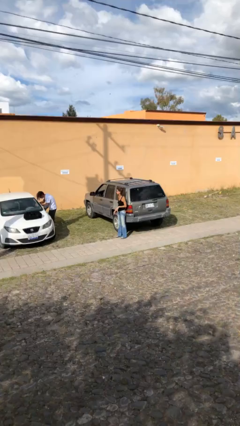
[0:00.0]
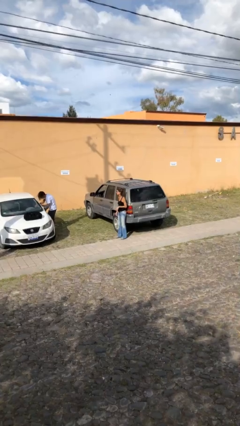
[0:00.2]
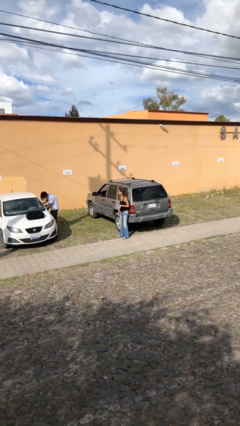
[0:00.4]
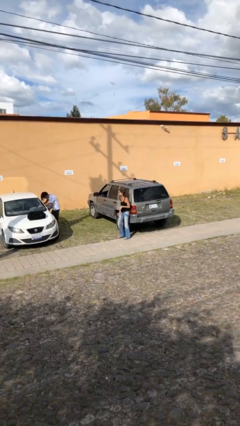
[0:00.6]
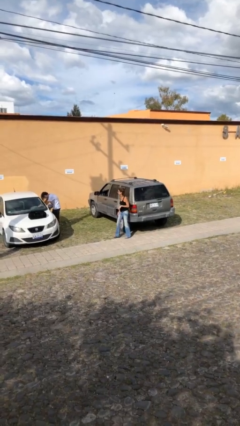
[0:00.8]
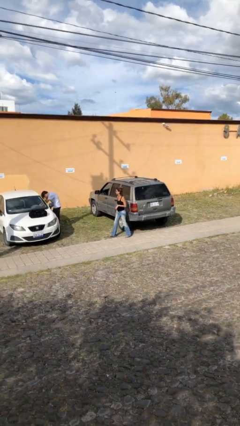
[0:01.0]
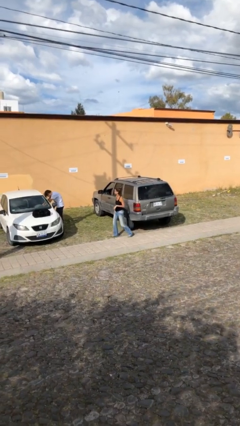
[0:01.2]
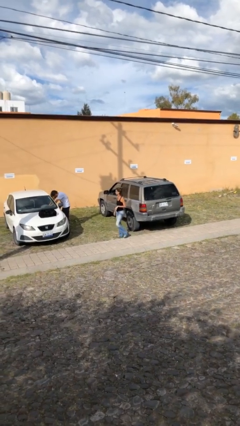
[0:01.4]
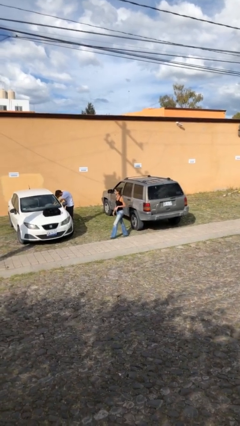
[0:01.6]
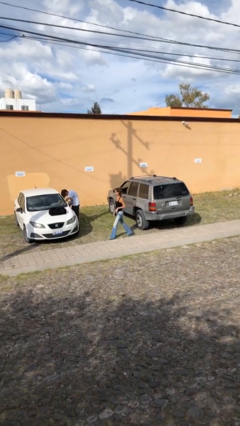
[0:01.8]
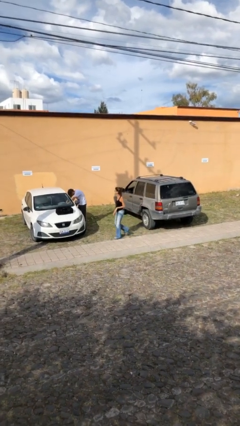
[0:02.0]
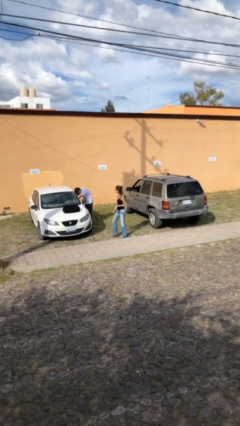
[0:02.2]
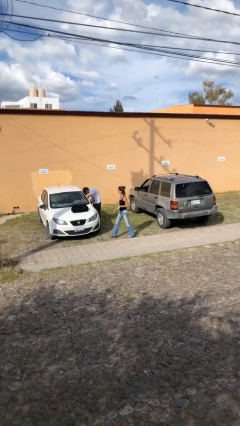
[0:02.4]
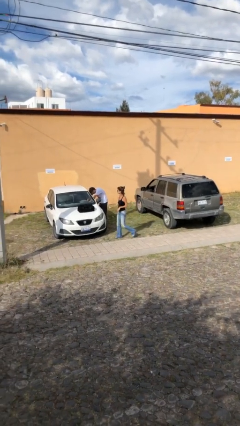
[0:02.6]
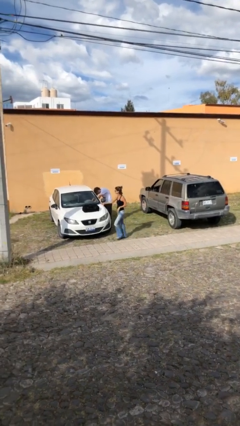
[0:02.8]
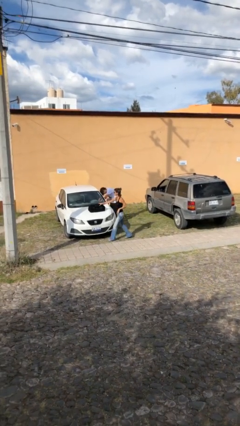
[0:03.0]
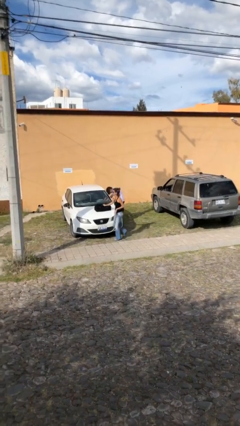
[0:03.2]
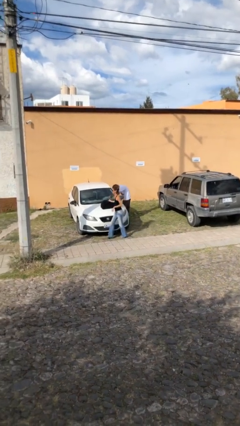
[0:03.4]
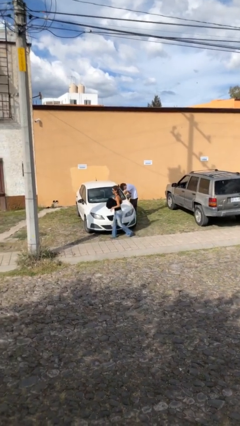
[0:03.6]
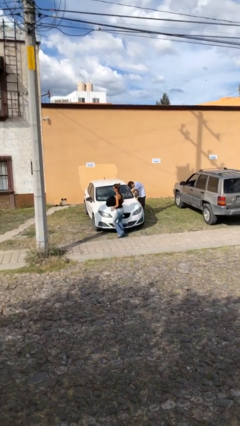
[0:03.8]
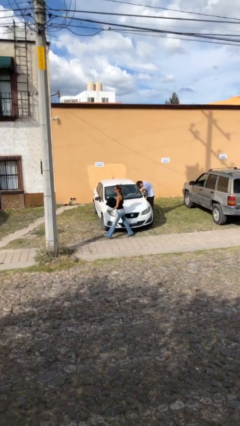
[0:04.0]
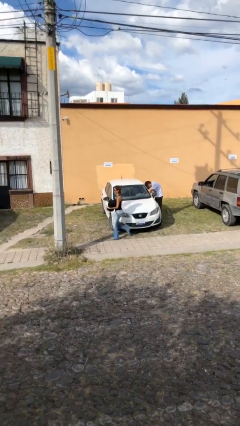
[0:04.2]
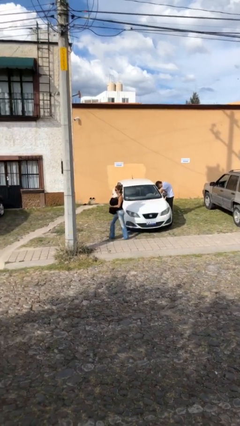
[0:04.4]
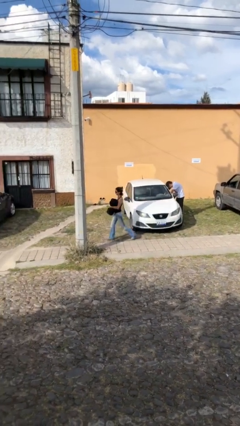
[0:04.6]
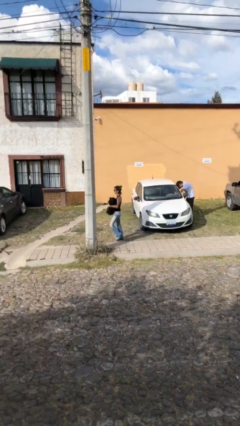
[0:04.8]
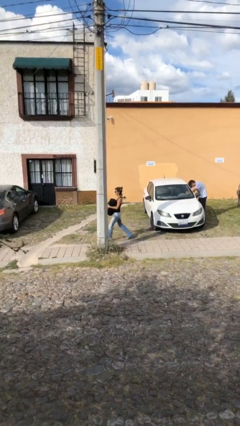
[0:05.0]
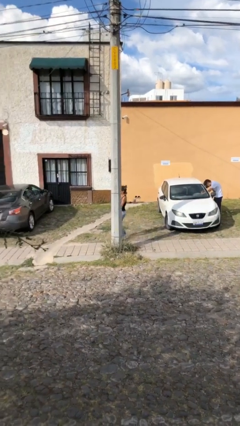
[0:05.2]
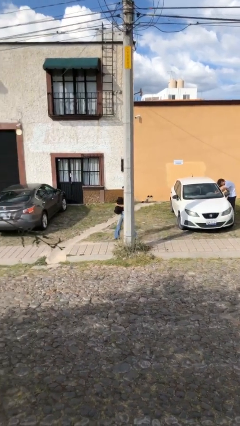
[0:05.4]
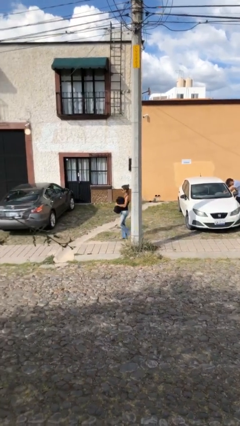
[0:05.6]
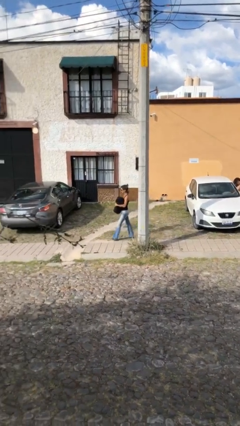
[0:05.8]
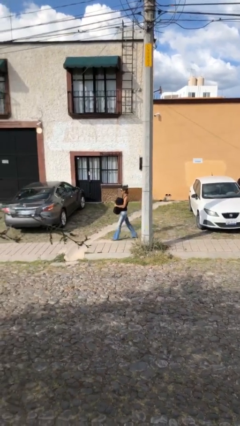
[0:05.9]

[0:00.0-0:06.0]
person steals object from person

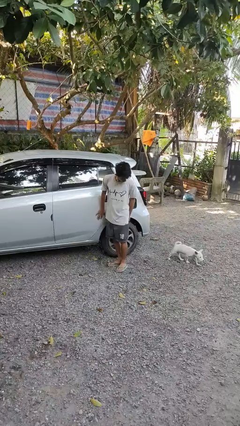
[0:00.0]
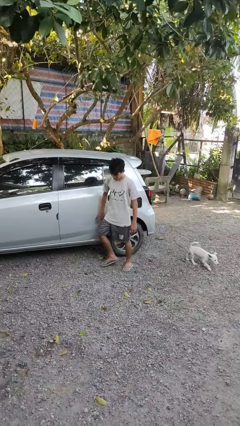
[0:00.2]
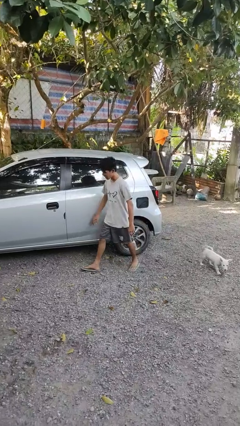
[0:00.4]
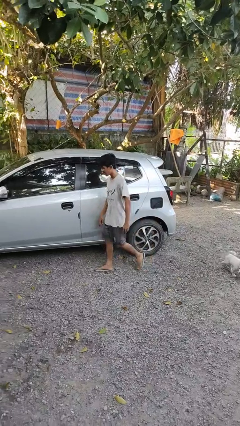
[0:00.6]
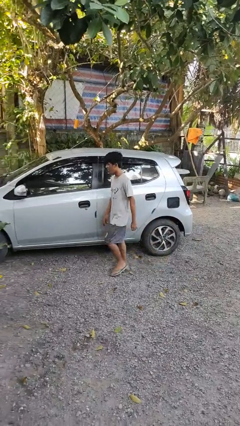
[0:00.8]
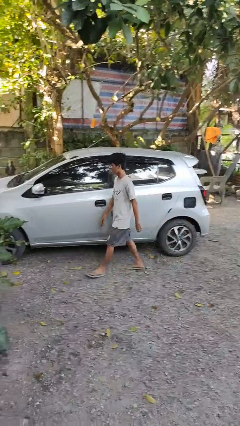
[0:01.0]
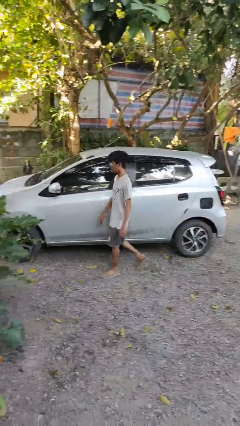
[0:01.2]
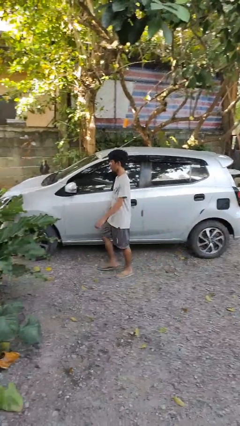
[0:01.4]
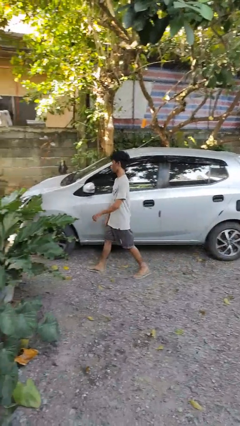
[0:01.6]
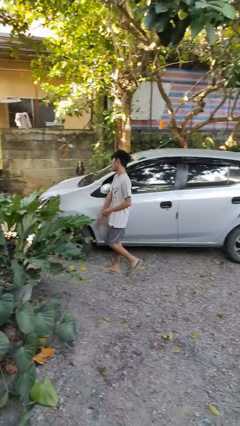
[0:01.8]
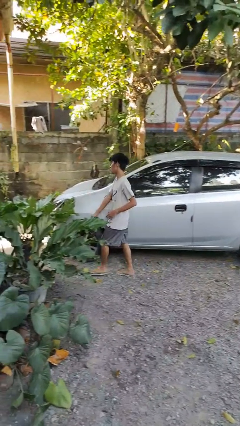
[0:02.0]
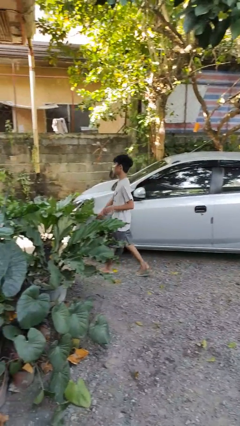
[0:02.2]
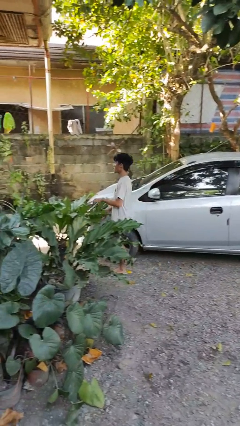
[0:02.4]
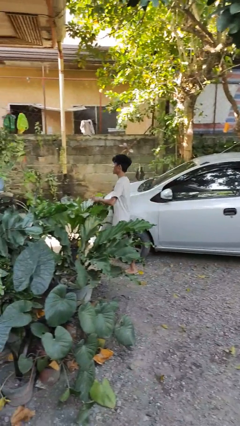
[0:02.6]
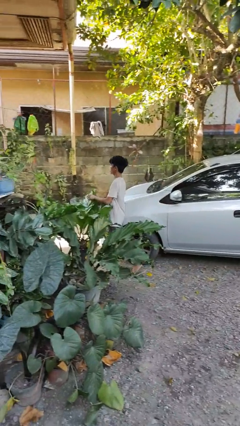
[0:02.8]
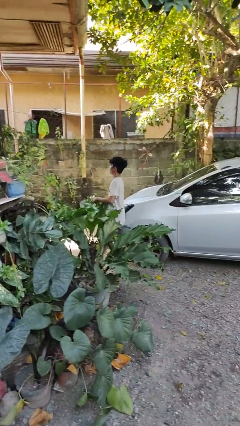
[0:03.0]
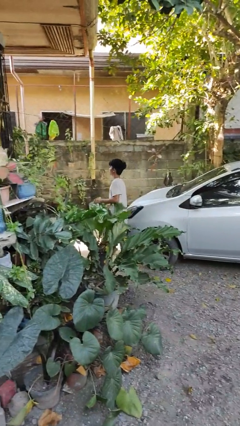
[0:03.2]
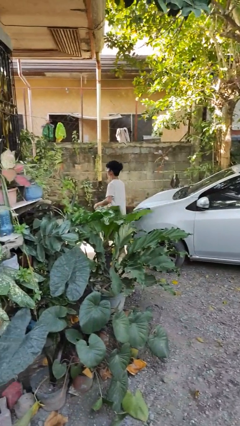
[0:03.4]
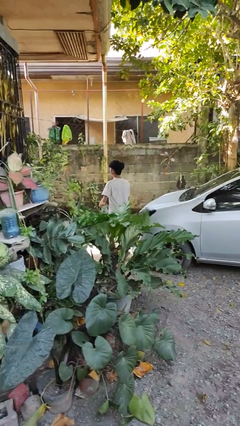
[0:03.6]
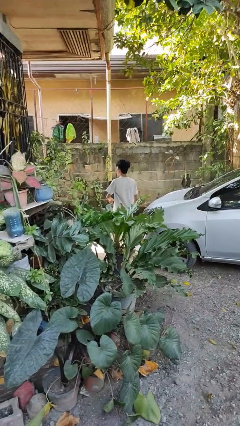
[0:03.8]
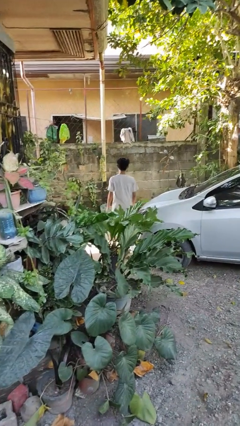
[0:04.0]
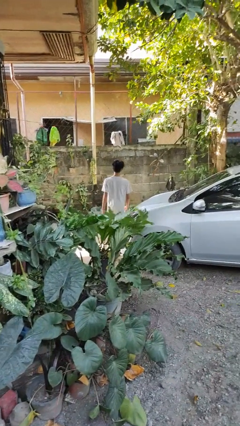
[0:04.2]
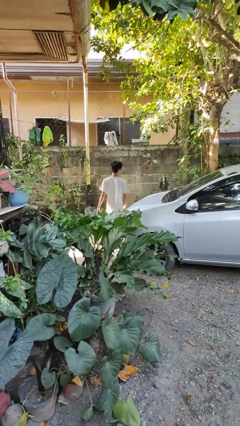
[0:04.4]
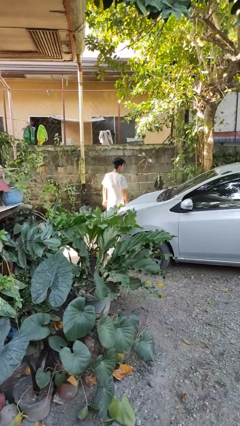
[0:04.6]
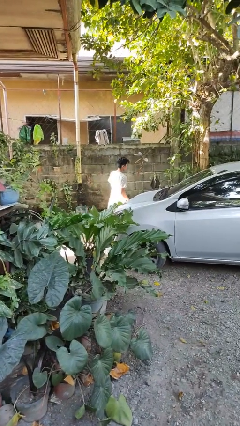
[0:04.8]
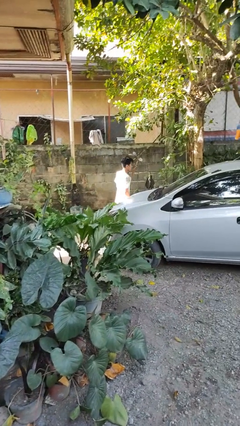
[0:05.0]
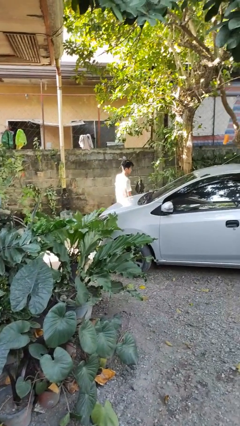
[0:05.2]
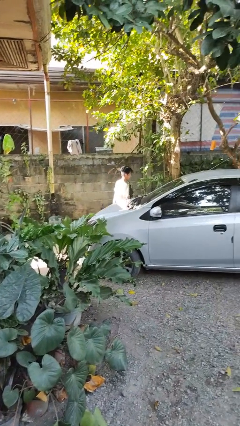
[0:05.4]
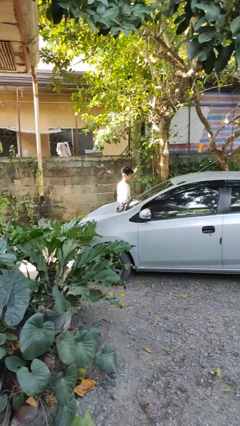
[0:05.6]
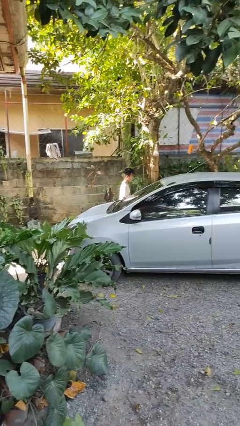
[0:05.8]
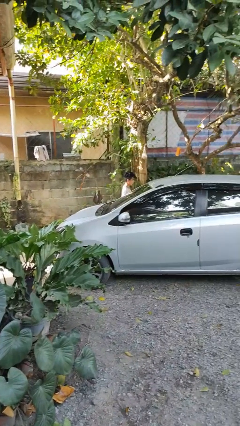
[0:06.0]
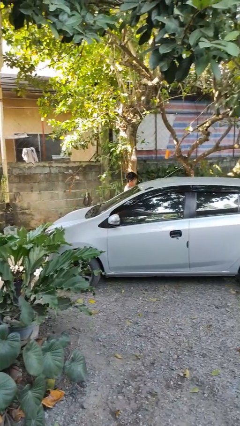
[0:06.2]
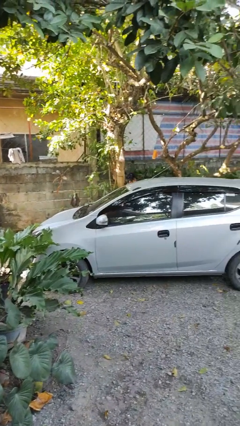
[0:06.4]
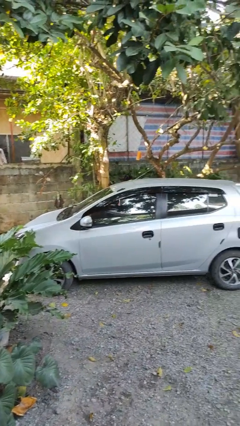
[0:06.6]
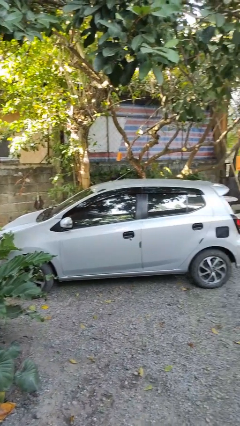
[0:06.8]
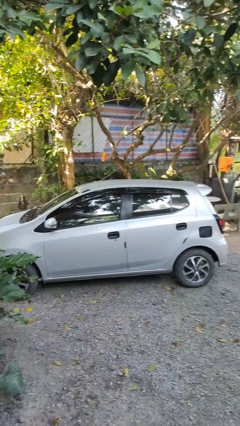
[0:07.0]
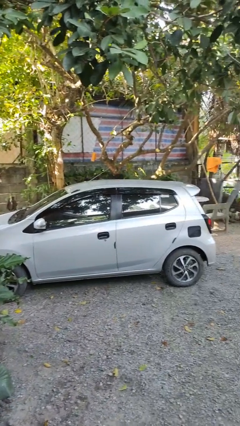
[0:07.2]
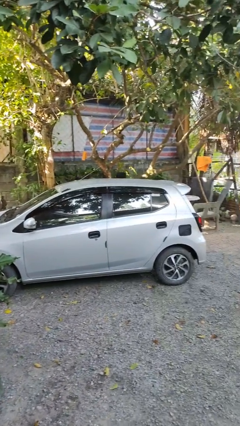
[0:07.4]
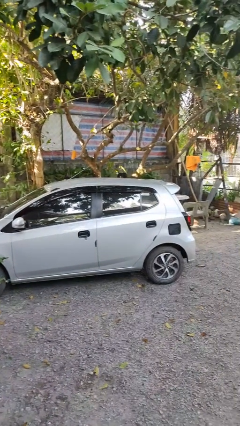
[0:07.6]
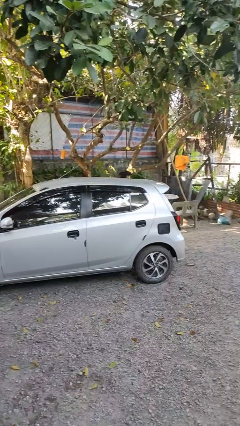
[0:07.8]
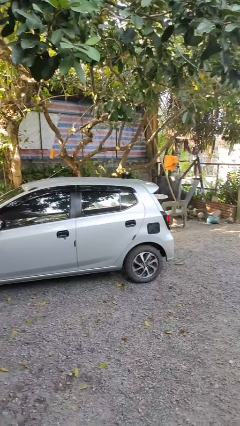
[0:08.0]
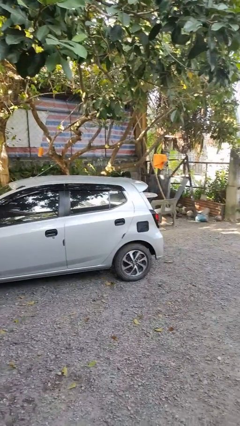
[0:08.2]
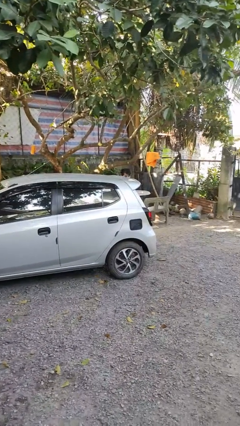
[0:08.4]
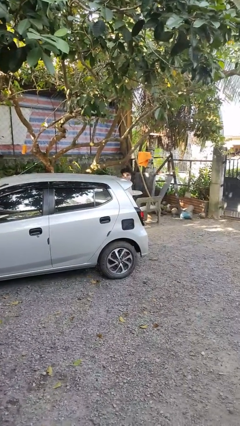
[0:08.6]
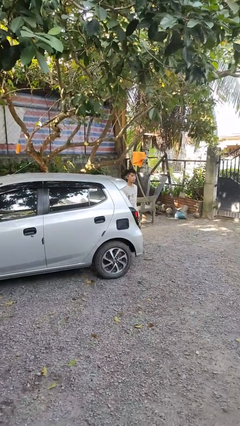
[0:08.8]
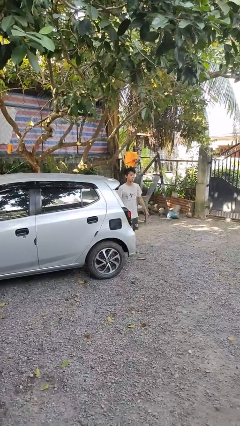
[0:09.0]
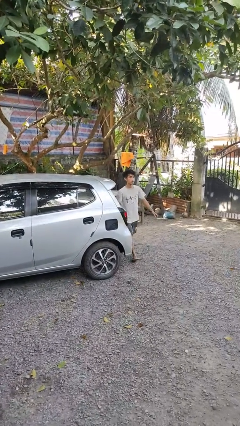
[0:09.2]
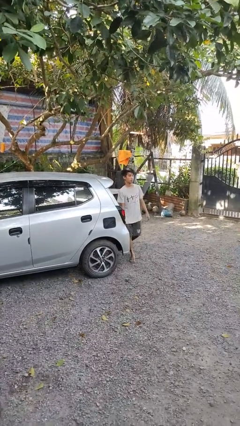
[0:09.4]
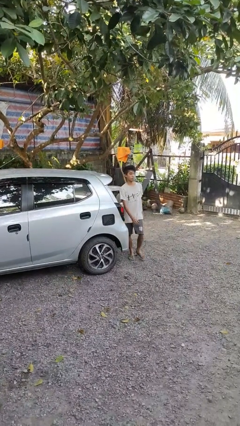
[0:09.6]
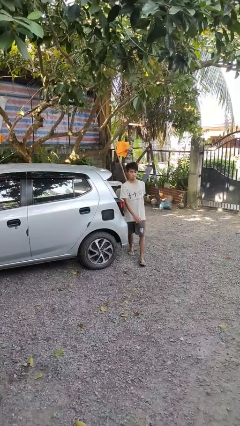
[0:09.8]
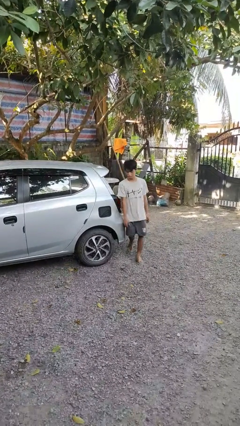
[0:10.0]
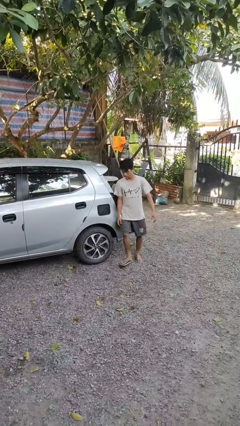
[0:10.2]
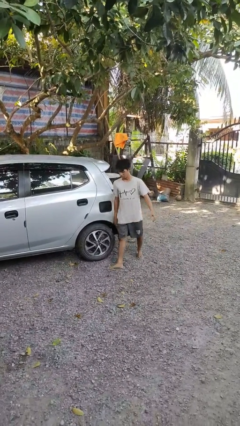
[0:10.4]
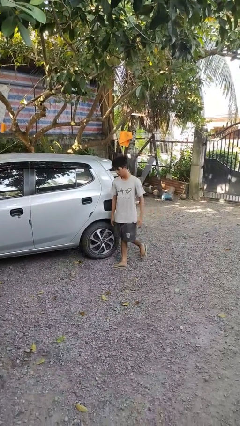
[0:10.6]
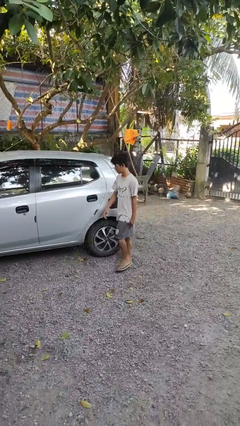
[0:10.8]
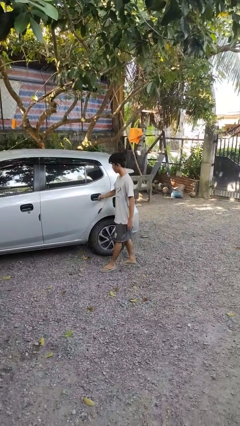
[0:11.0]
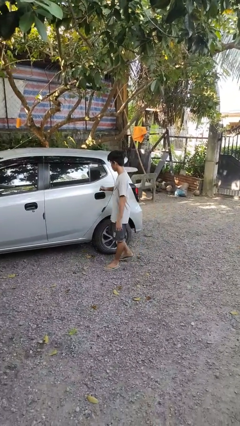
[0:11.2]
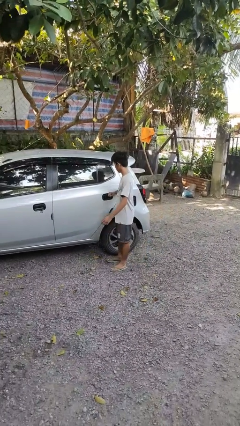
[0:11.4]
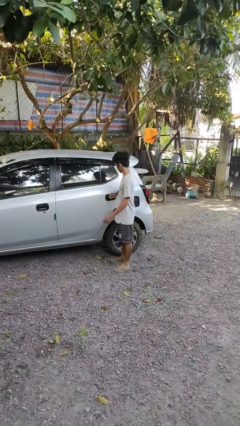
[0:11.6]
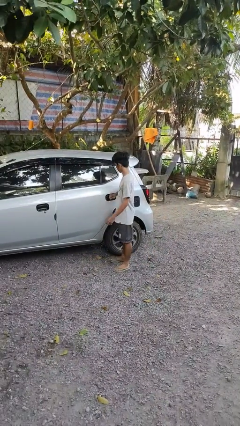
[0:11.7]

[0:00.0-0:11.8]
person walks around car
